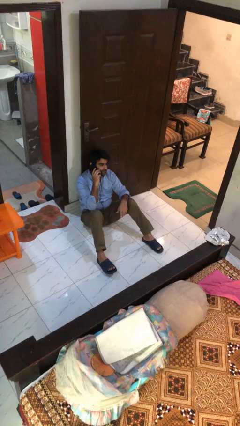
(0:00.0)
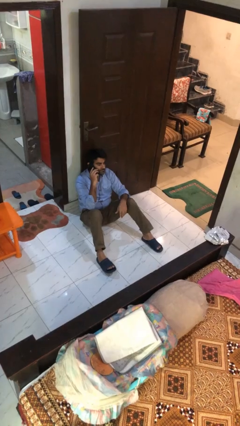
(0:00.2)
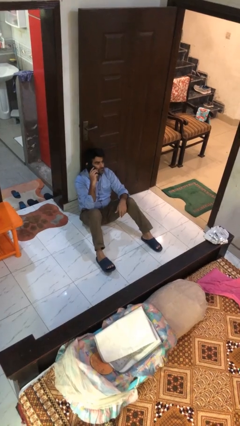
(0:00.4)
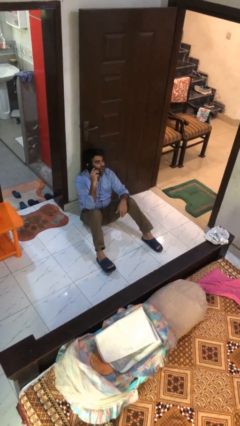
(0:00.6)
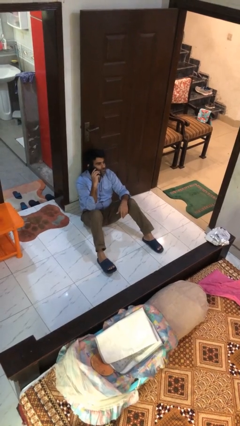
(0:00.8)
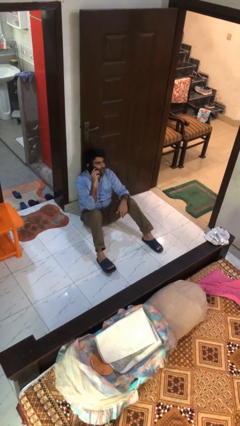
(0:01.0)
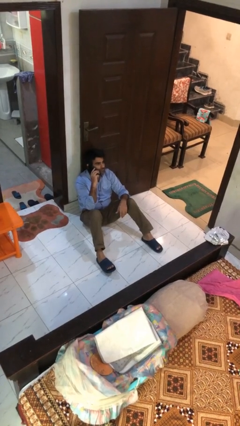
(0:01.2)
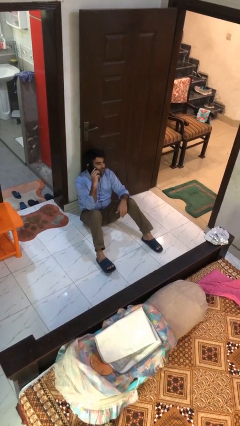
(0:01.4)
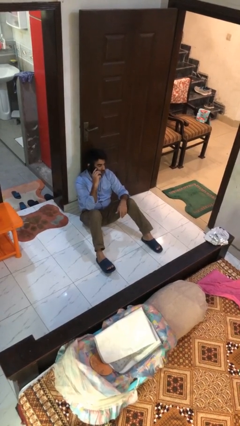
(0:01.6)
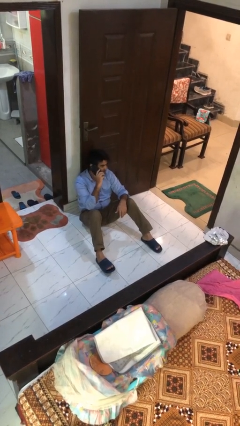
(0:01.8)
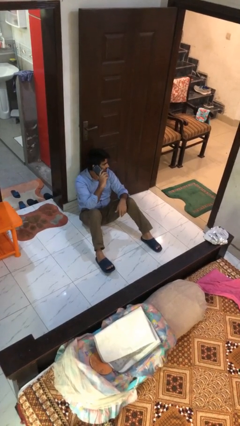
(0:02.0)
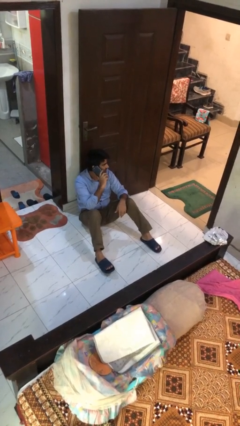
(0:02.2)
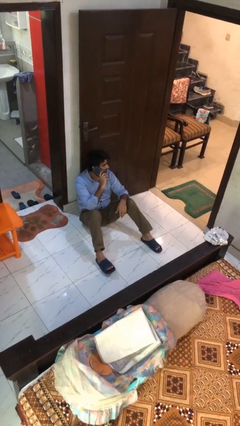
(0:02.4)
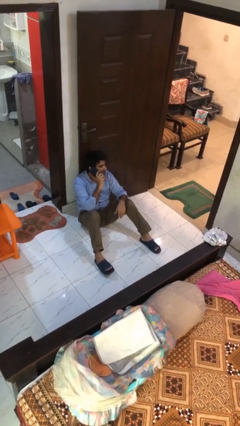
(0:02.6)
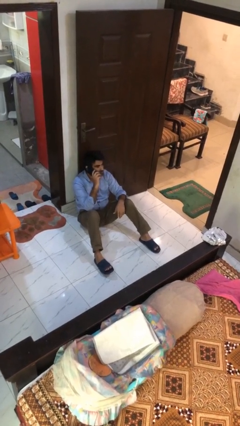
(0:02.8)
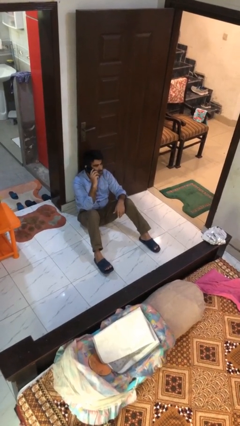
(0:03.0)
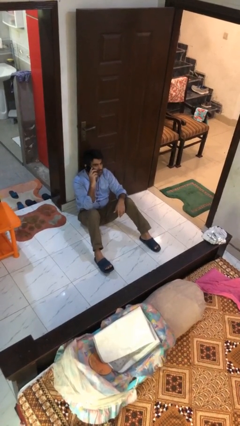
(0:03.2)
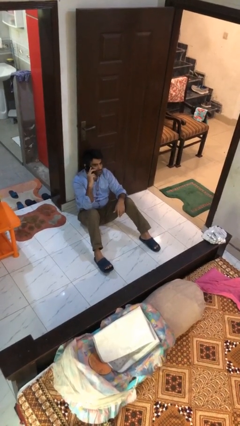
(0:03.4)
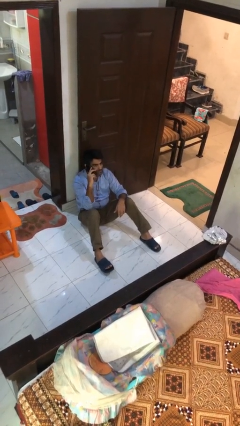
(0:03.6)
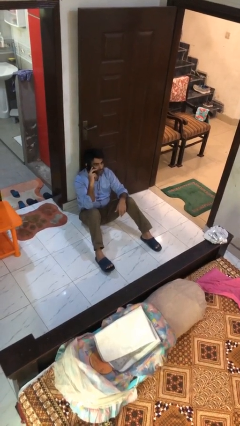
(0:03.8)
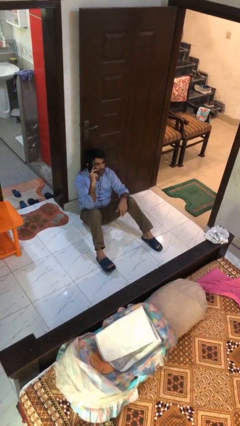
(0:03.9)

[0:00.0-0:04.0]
person talks on phone

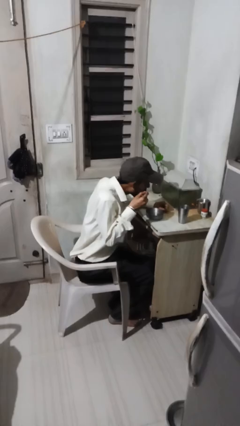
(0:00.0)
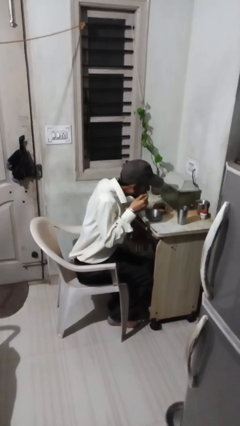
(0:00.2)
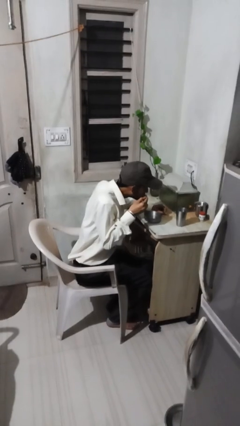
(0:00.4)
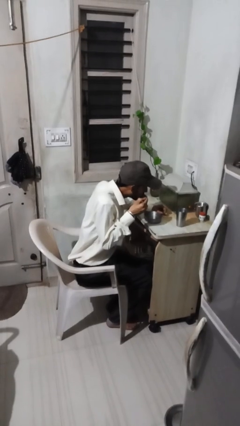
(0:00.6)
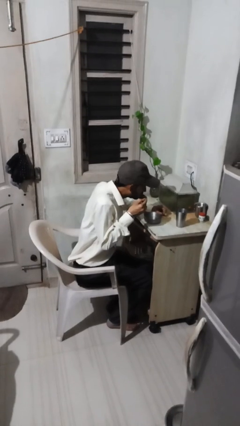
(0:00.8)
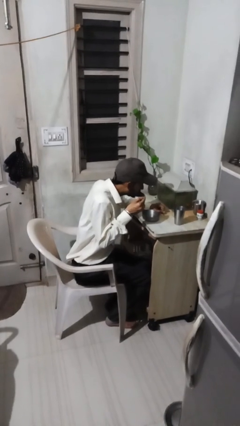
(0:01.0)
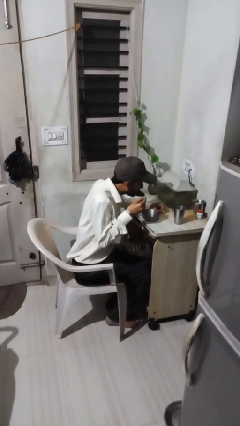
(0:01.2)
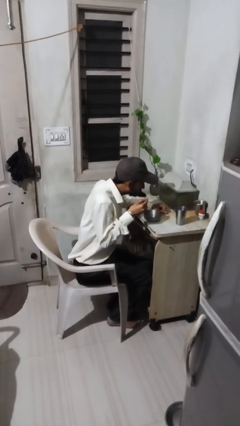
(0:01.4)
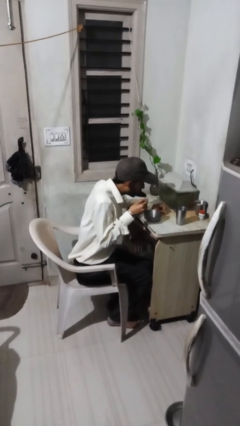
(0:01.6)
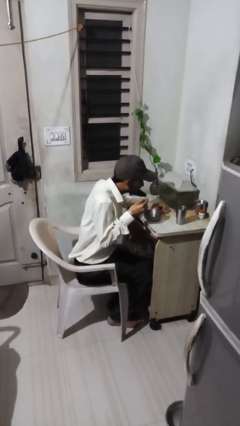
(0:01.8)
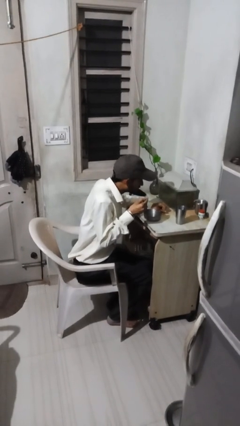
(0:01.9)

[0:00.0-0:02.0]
person eats with utensil

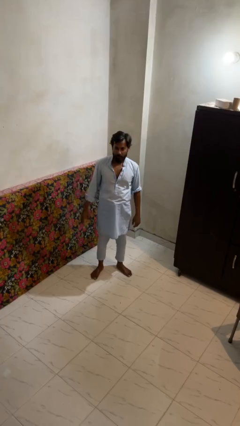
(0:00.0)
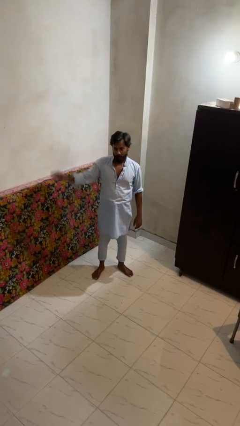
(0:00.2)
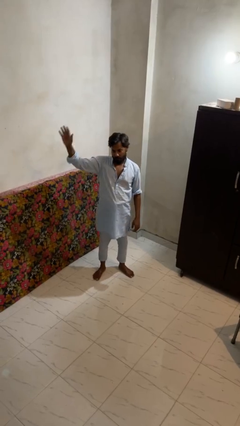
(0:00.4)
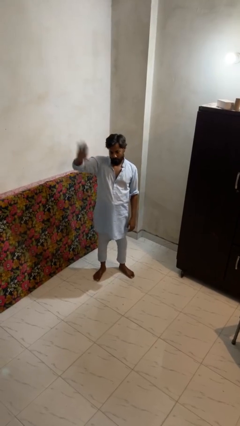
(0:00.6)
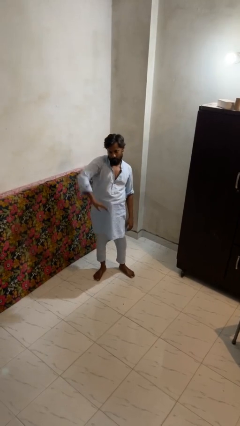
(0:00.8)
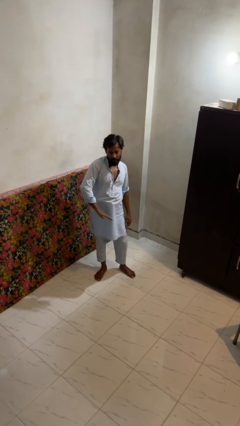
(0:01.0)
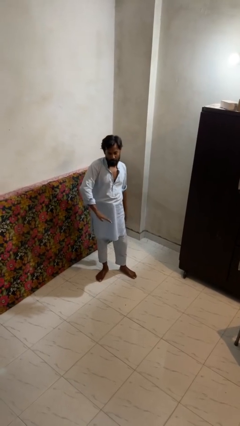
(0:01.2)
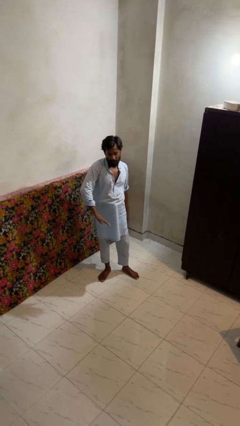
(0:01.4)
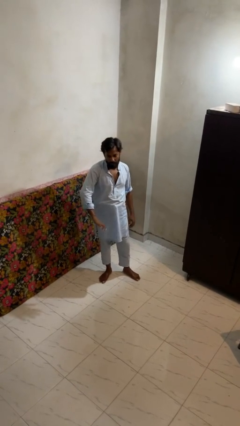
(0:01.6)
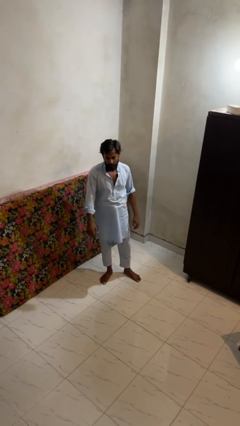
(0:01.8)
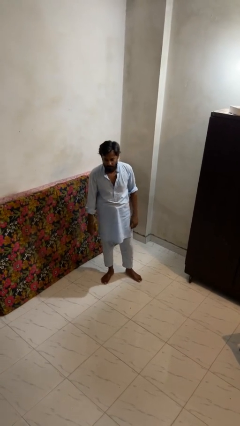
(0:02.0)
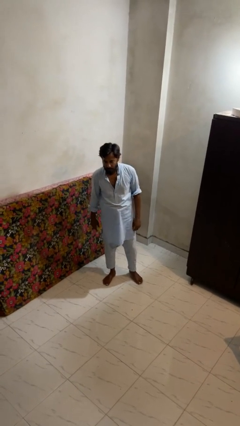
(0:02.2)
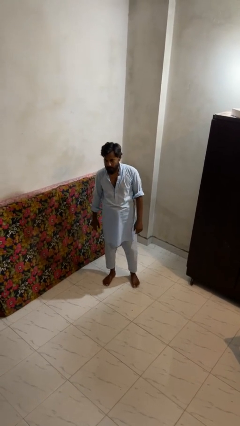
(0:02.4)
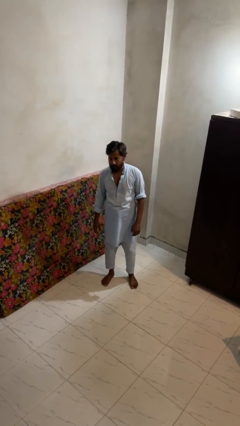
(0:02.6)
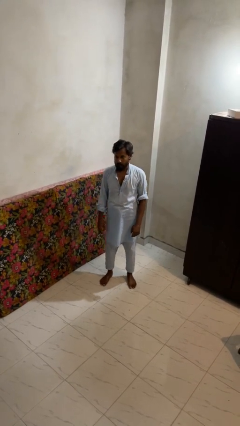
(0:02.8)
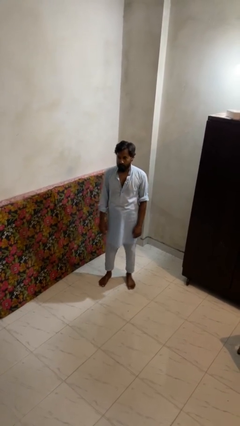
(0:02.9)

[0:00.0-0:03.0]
person gestures swipe down

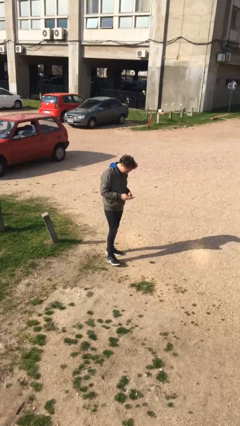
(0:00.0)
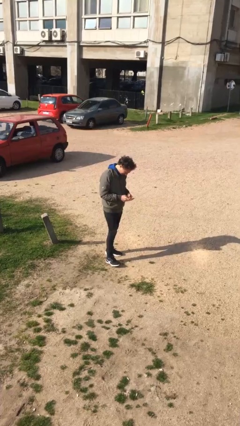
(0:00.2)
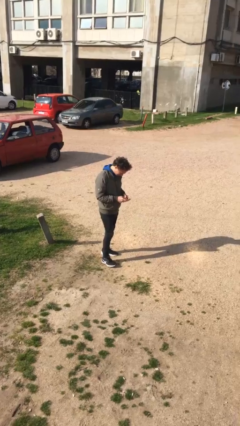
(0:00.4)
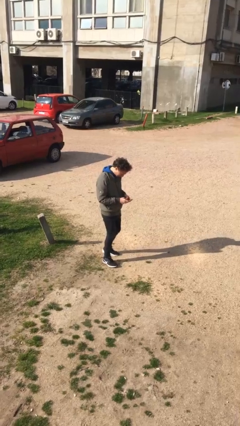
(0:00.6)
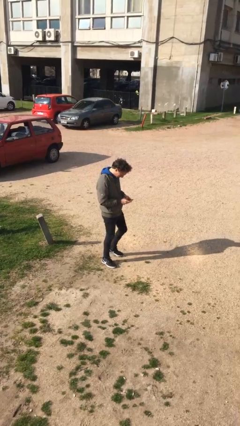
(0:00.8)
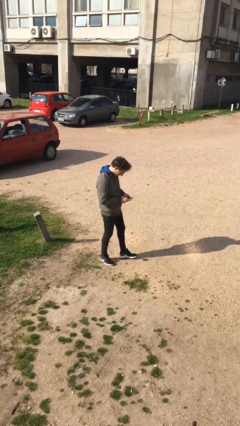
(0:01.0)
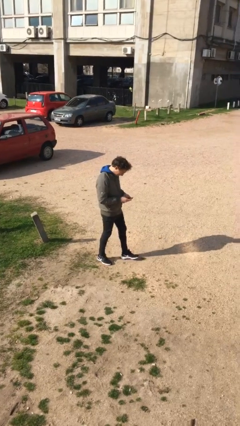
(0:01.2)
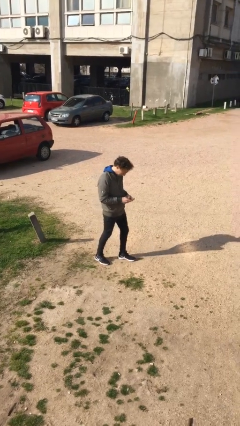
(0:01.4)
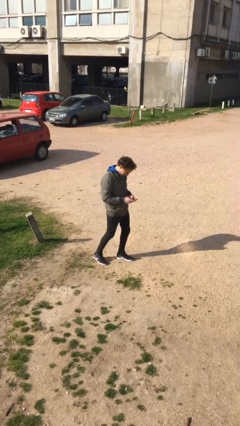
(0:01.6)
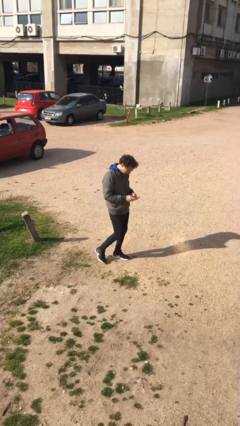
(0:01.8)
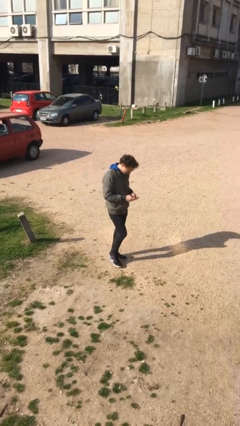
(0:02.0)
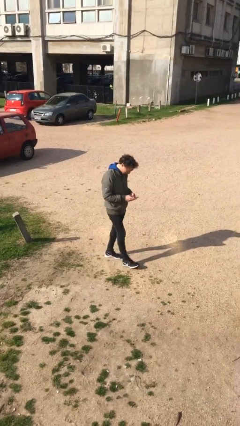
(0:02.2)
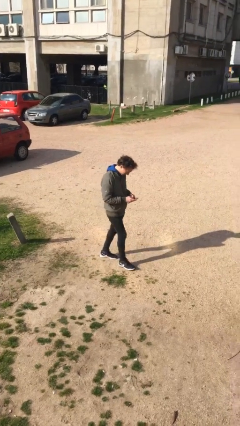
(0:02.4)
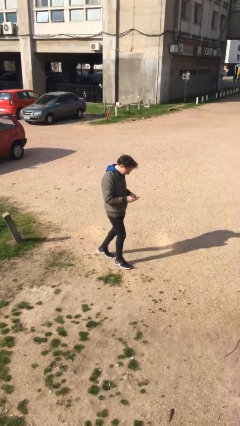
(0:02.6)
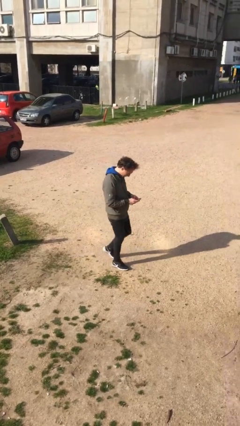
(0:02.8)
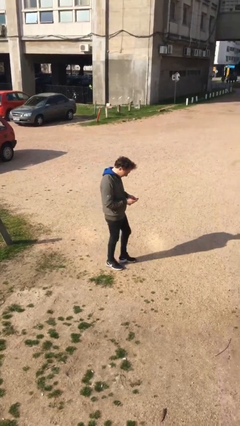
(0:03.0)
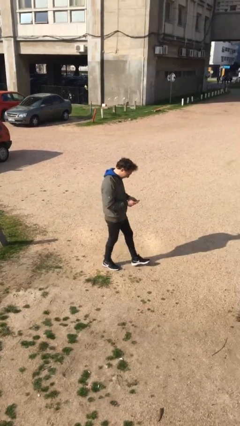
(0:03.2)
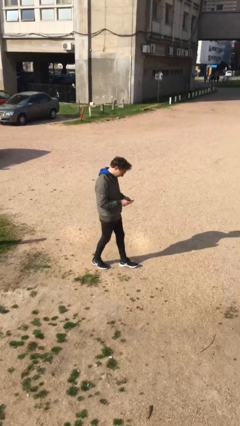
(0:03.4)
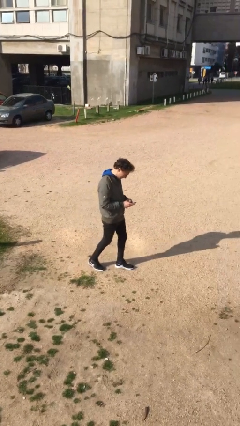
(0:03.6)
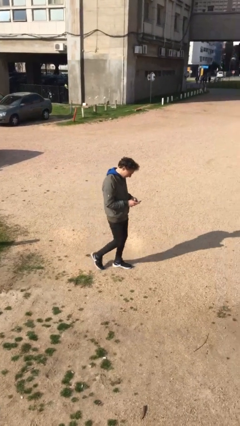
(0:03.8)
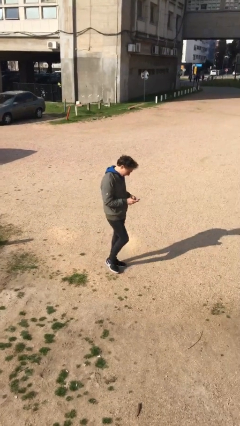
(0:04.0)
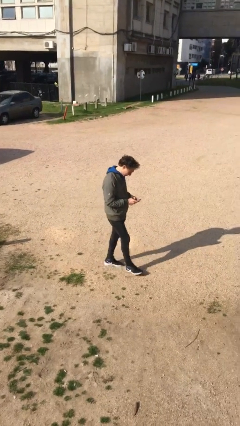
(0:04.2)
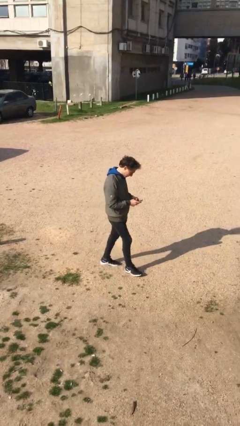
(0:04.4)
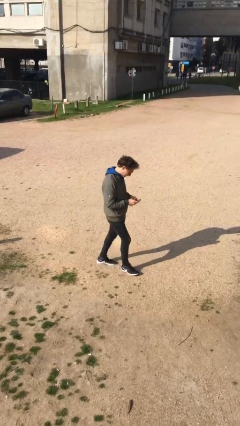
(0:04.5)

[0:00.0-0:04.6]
person texts on phone

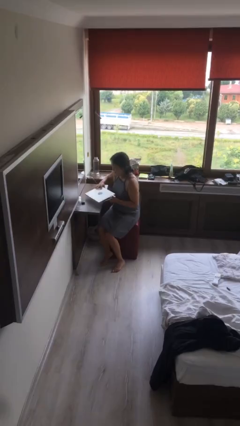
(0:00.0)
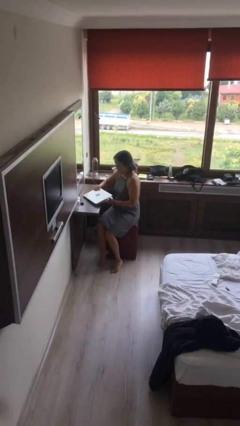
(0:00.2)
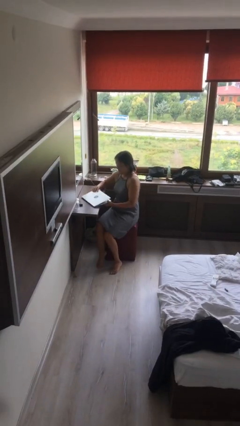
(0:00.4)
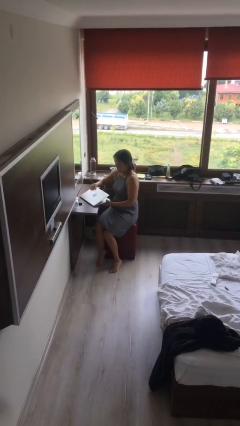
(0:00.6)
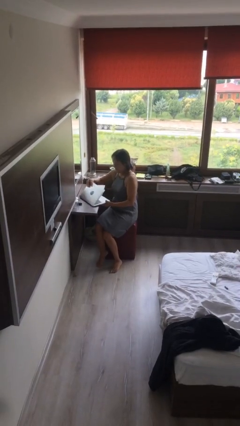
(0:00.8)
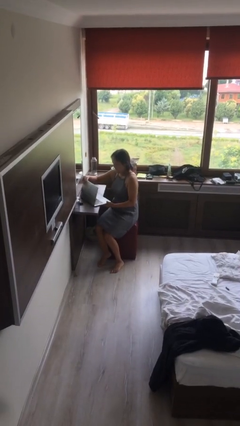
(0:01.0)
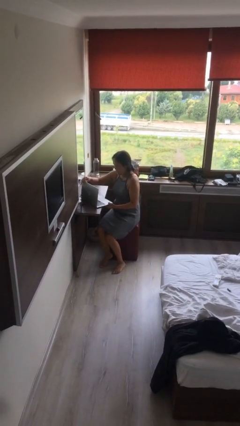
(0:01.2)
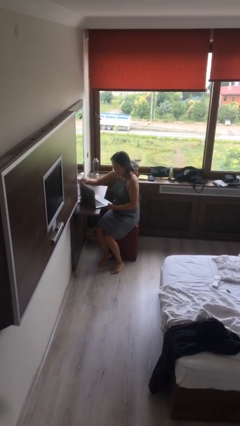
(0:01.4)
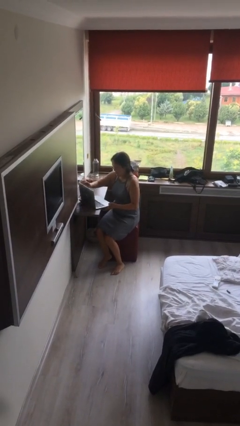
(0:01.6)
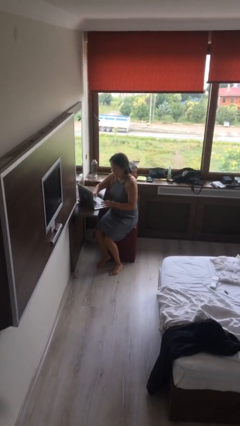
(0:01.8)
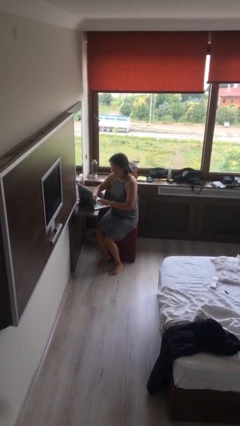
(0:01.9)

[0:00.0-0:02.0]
person sits down

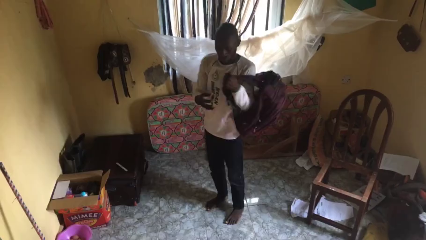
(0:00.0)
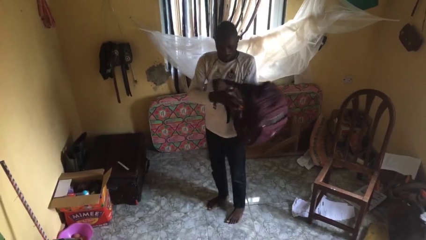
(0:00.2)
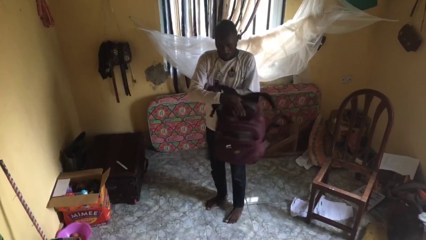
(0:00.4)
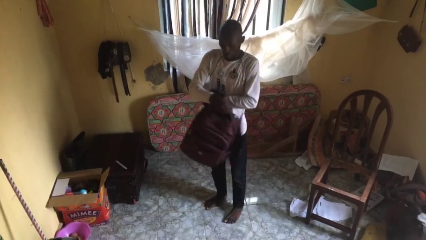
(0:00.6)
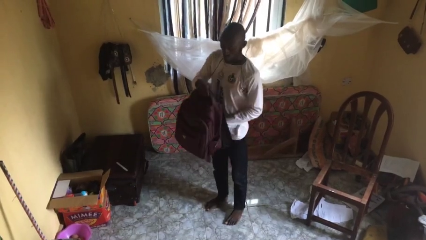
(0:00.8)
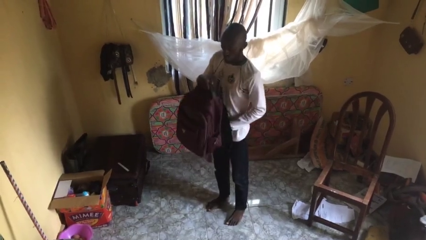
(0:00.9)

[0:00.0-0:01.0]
person takes off backpack

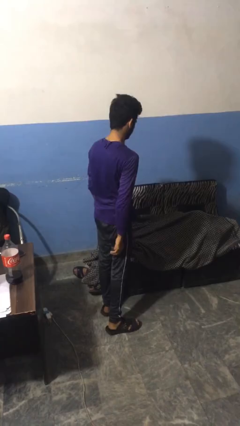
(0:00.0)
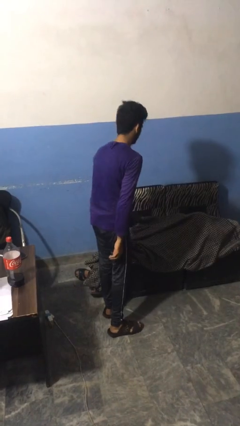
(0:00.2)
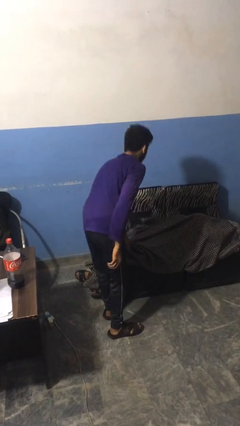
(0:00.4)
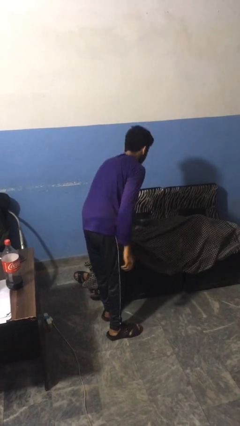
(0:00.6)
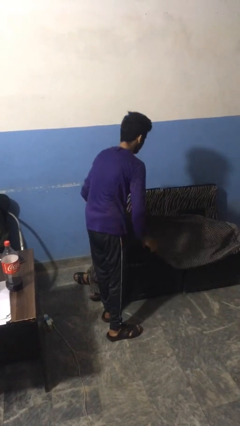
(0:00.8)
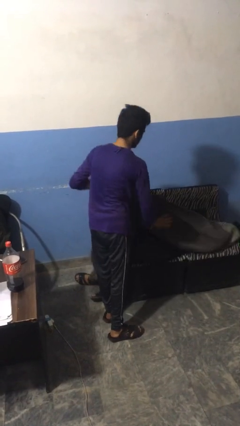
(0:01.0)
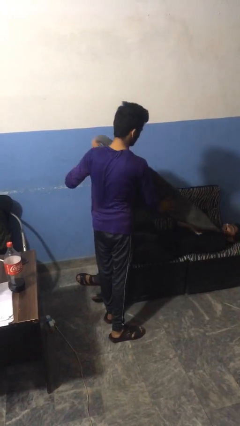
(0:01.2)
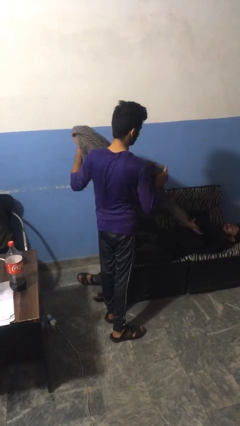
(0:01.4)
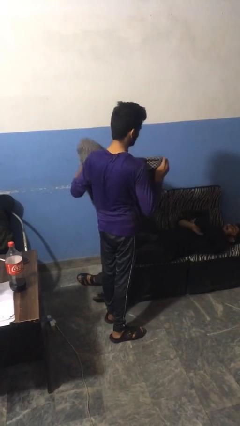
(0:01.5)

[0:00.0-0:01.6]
person uncovers friend with blanket
